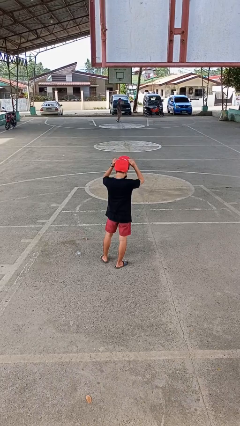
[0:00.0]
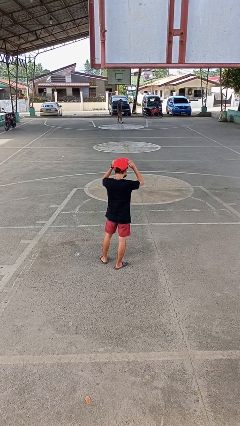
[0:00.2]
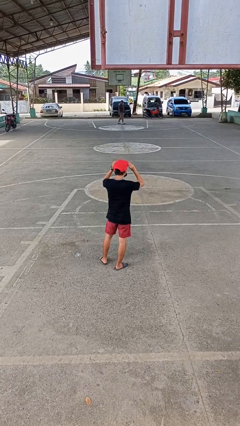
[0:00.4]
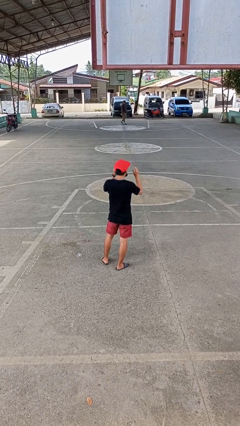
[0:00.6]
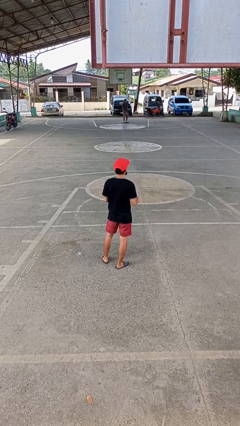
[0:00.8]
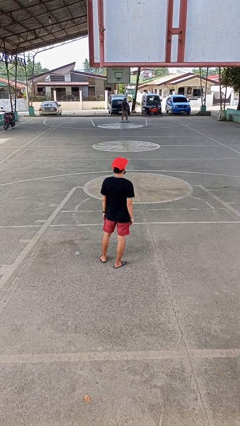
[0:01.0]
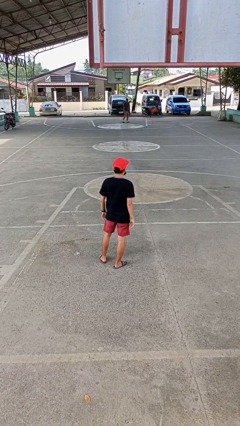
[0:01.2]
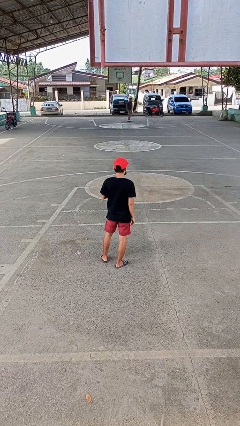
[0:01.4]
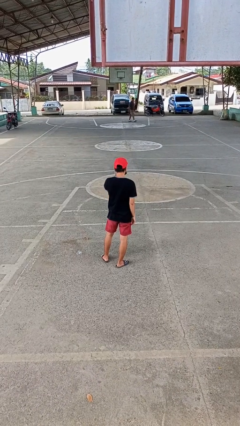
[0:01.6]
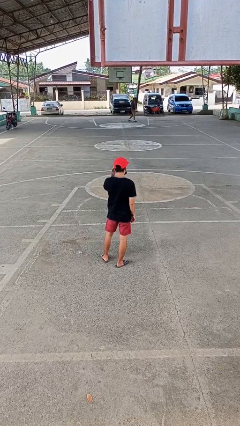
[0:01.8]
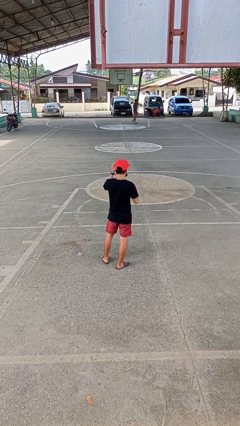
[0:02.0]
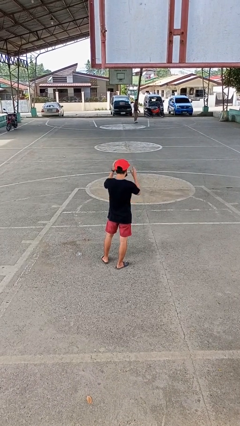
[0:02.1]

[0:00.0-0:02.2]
person puts on hat

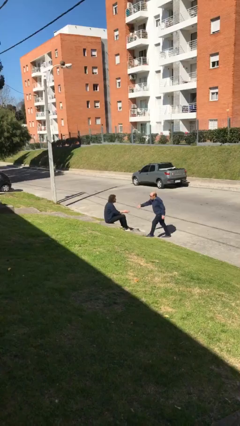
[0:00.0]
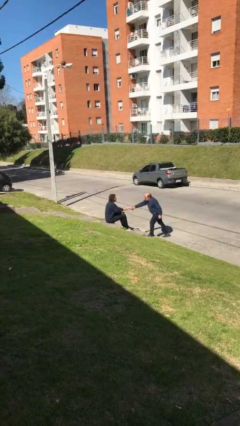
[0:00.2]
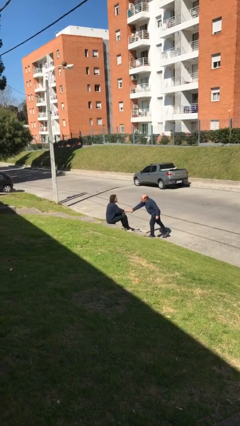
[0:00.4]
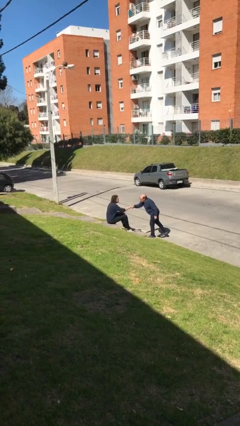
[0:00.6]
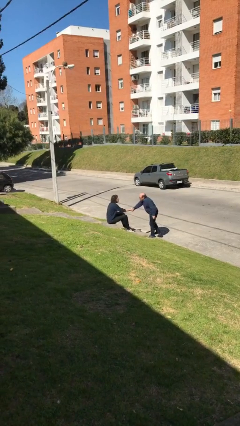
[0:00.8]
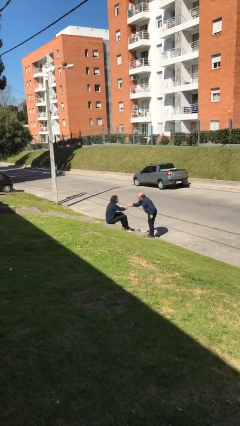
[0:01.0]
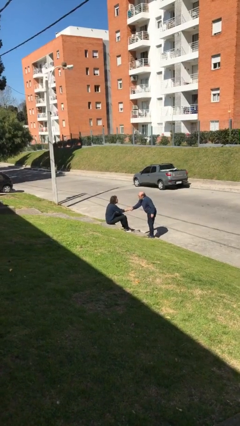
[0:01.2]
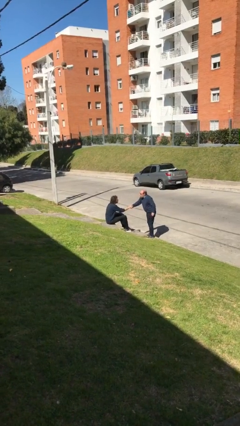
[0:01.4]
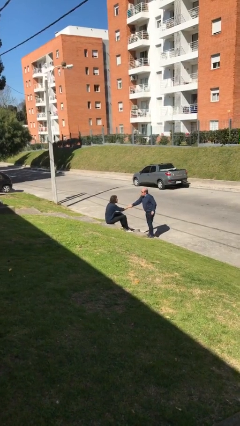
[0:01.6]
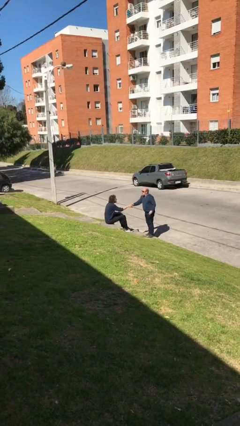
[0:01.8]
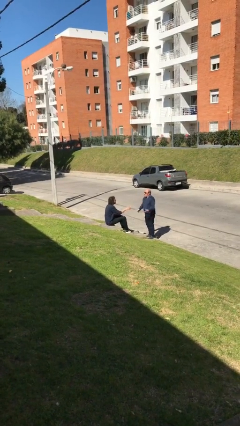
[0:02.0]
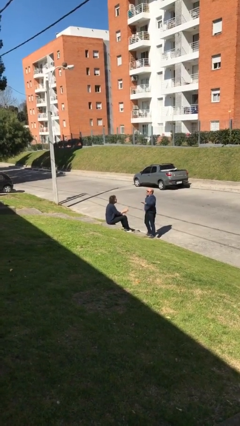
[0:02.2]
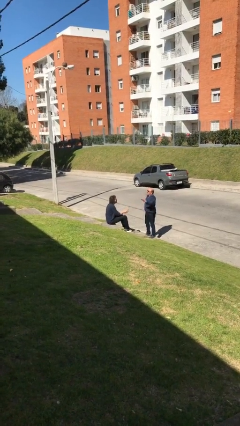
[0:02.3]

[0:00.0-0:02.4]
person shakes hand

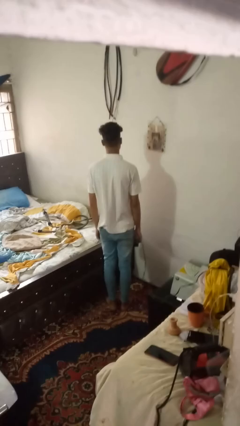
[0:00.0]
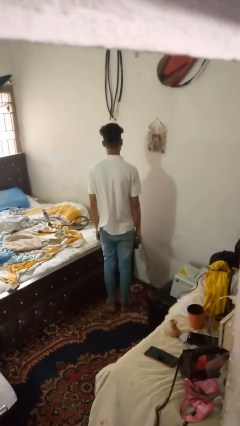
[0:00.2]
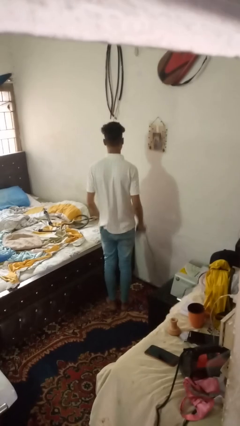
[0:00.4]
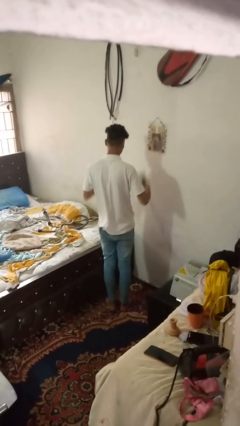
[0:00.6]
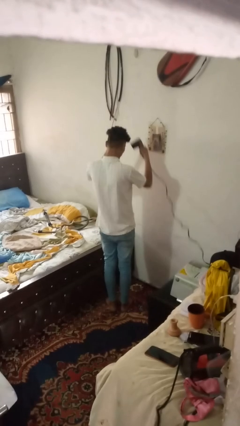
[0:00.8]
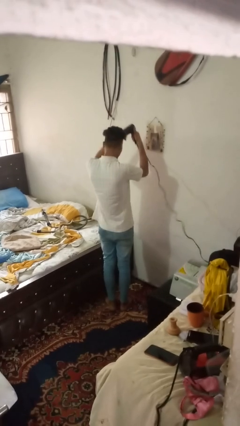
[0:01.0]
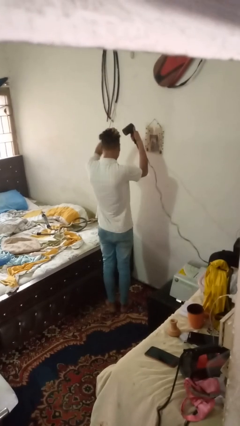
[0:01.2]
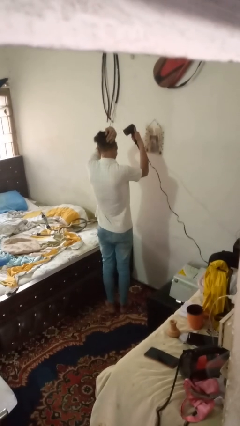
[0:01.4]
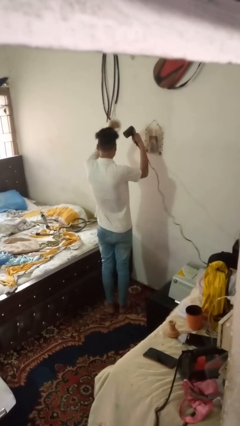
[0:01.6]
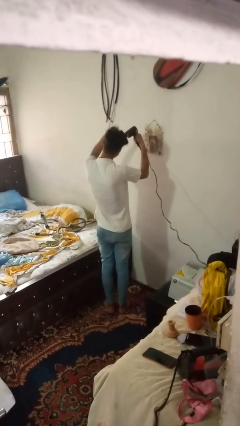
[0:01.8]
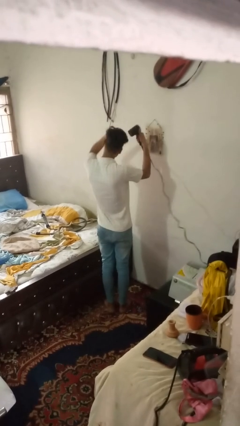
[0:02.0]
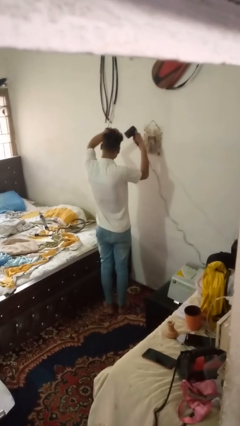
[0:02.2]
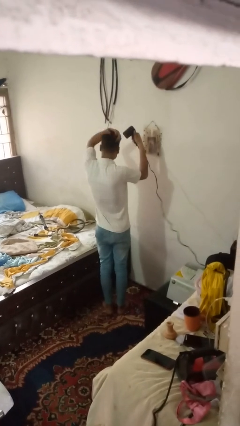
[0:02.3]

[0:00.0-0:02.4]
person dries hair with hairdryer

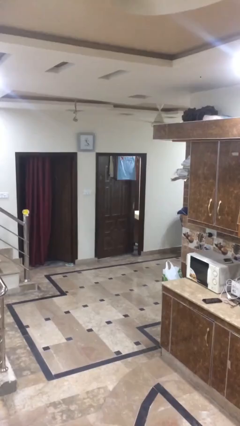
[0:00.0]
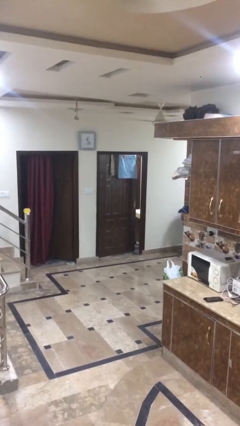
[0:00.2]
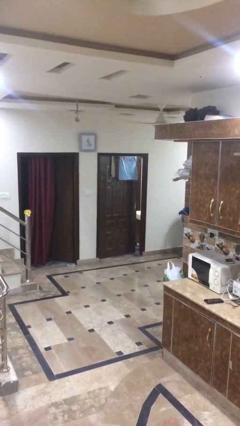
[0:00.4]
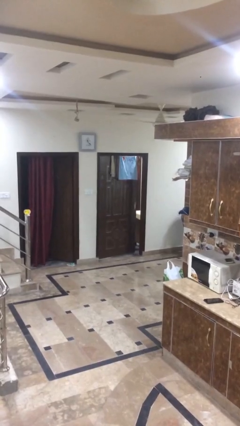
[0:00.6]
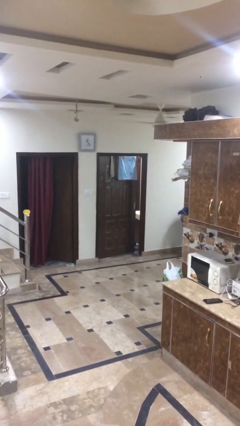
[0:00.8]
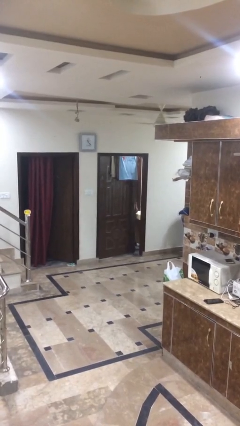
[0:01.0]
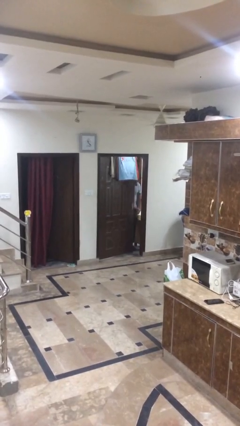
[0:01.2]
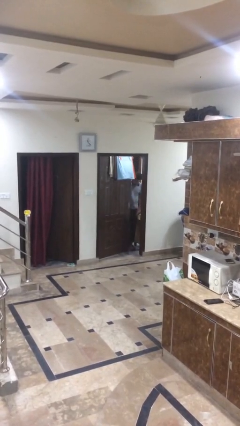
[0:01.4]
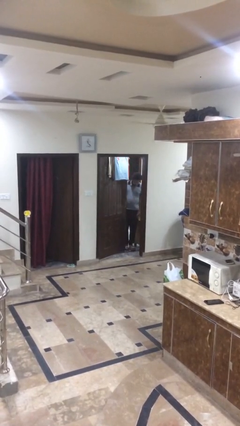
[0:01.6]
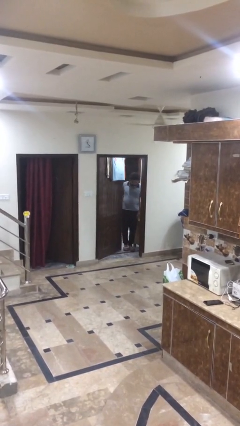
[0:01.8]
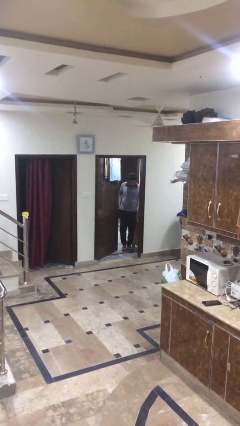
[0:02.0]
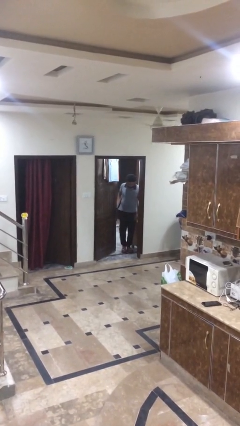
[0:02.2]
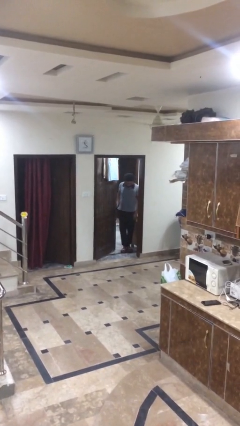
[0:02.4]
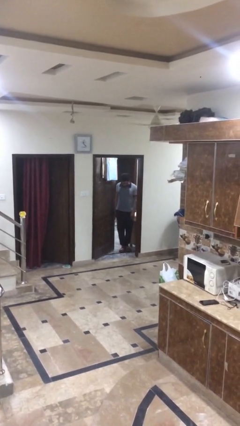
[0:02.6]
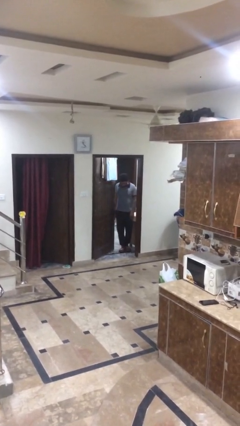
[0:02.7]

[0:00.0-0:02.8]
person opens facility door

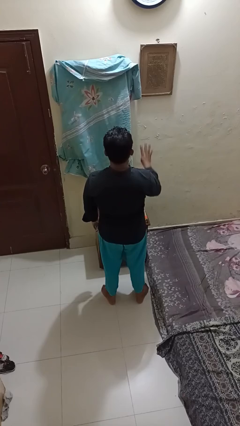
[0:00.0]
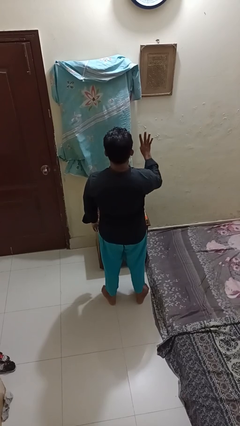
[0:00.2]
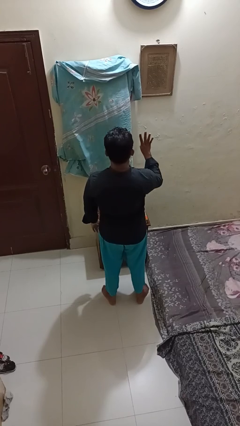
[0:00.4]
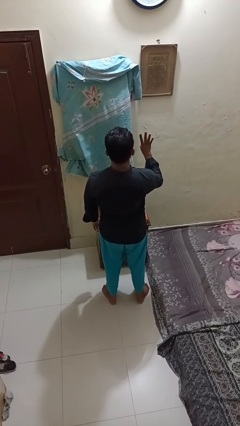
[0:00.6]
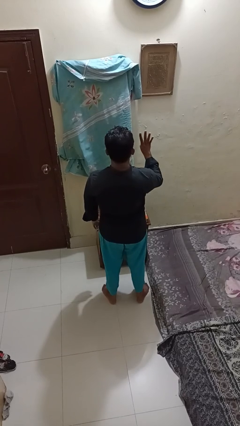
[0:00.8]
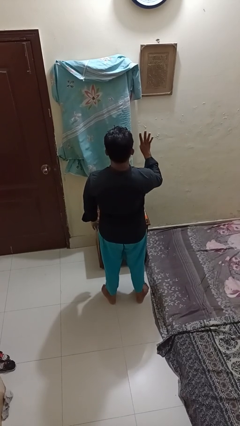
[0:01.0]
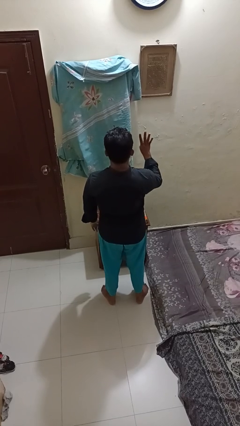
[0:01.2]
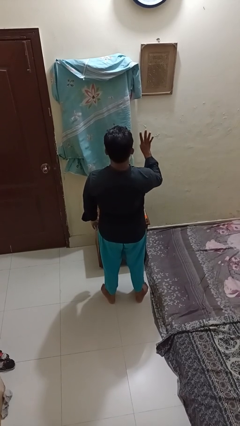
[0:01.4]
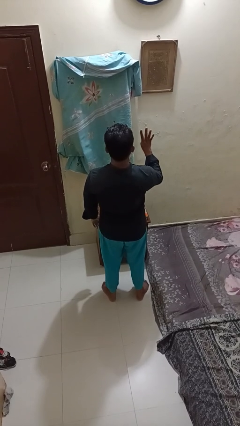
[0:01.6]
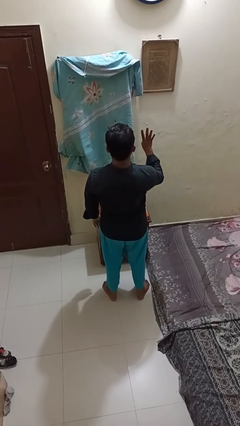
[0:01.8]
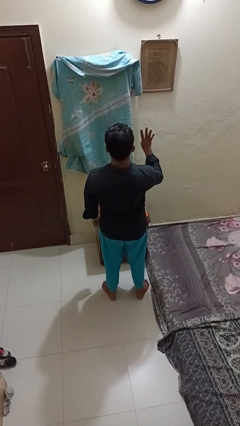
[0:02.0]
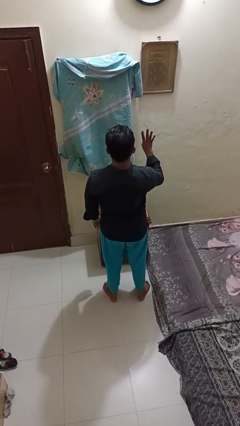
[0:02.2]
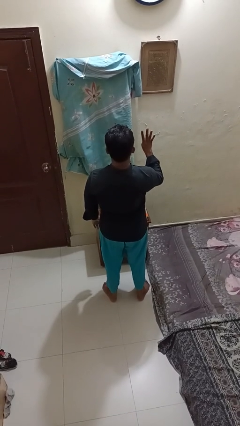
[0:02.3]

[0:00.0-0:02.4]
person gestures number four

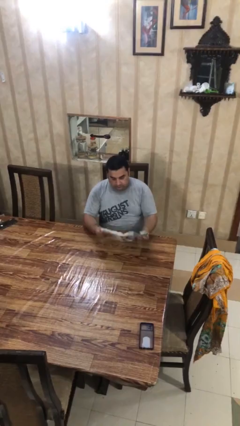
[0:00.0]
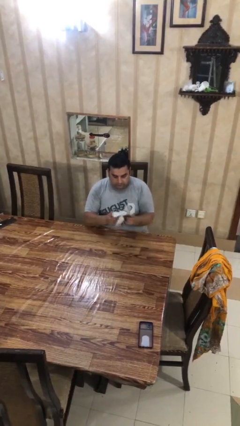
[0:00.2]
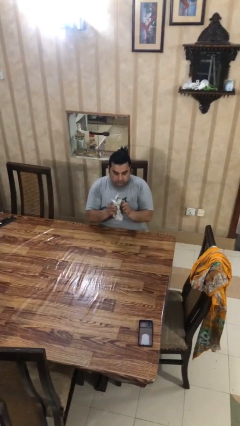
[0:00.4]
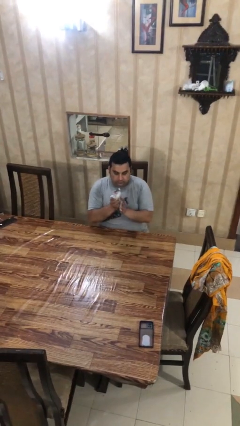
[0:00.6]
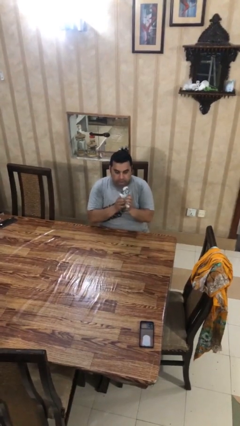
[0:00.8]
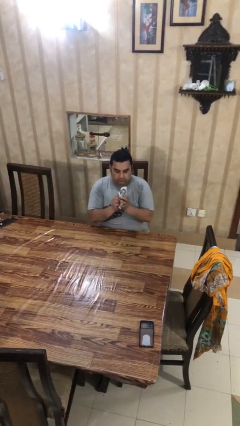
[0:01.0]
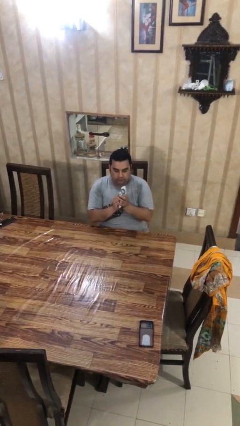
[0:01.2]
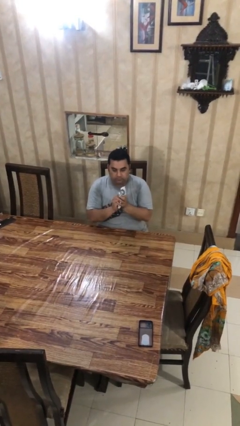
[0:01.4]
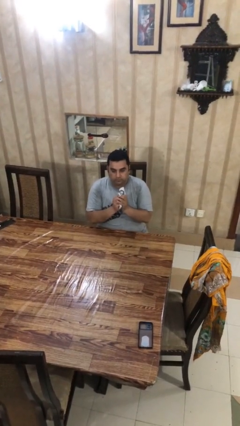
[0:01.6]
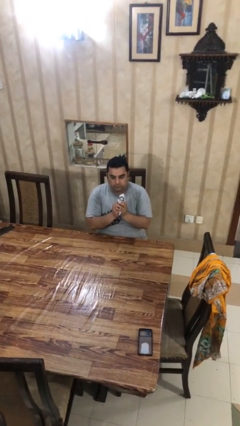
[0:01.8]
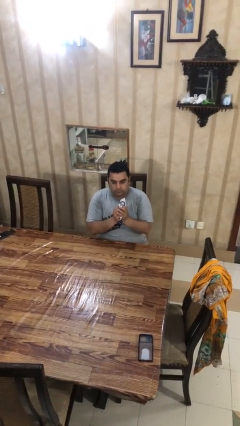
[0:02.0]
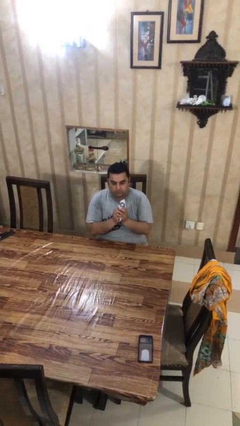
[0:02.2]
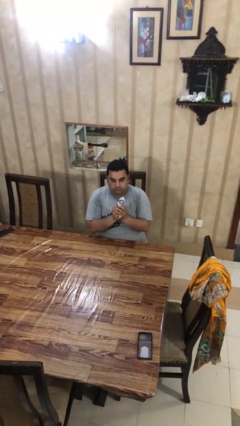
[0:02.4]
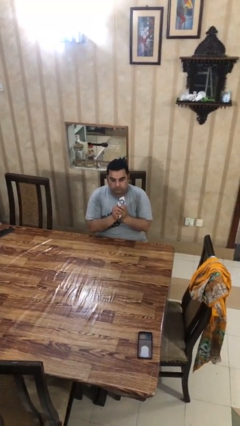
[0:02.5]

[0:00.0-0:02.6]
person crumples paper

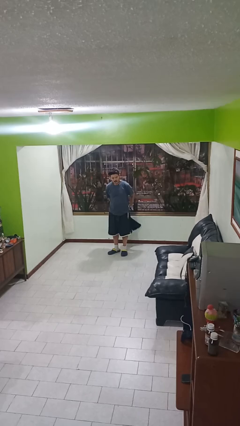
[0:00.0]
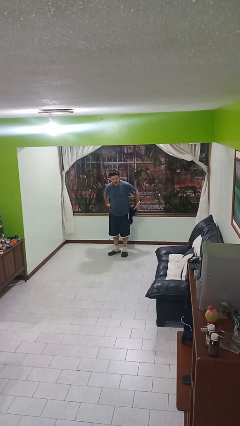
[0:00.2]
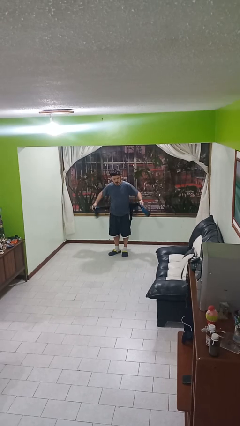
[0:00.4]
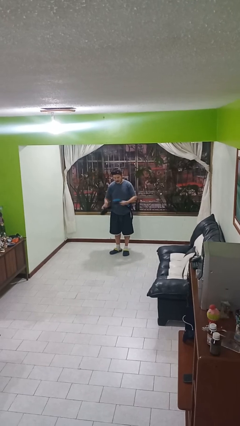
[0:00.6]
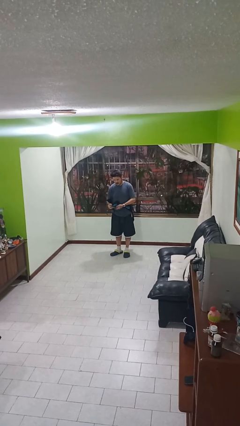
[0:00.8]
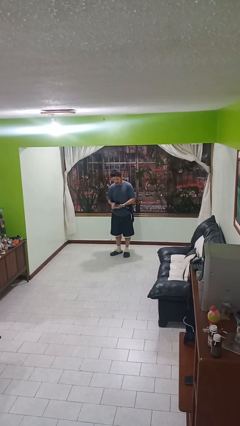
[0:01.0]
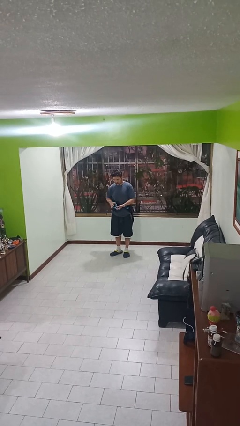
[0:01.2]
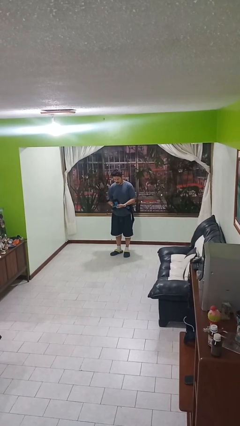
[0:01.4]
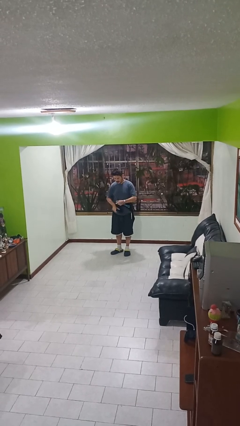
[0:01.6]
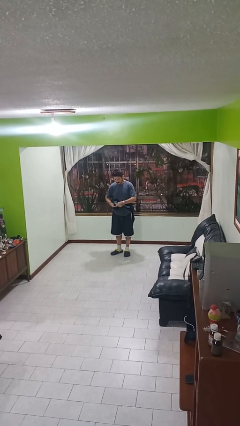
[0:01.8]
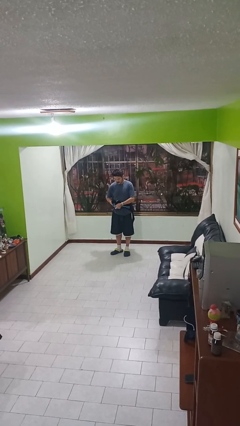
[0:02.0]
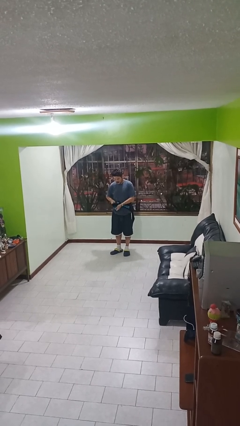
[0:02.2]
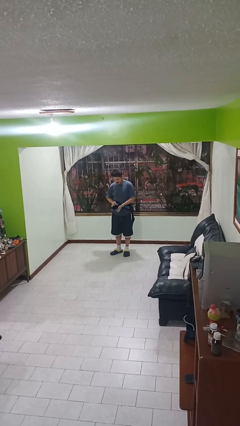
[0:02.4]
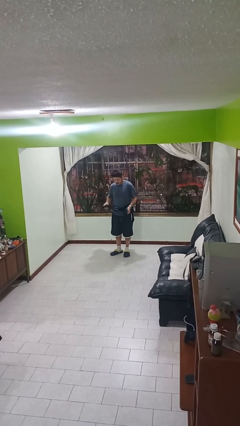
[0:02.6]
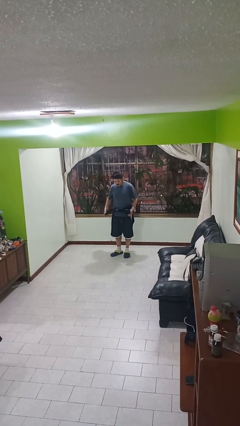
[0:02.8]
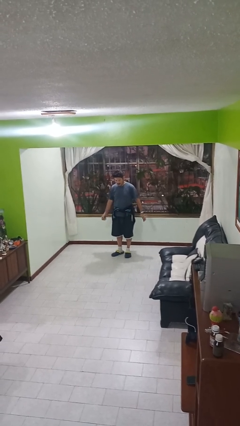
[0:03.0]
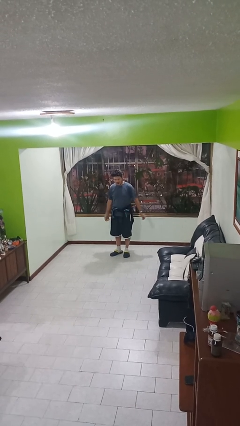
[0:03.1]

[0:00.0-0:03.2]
person ties jacket around waist
